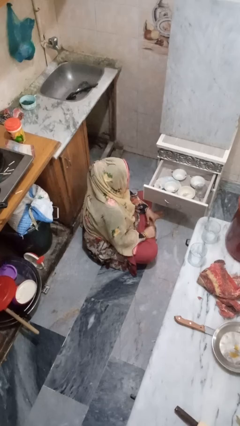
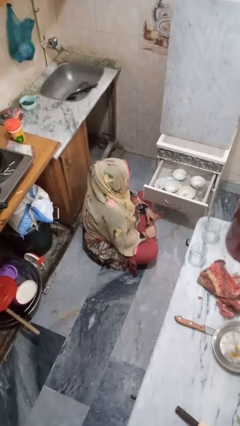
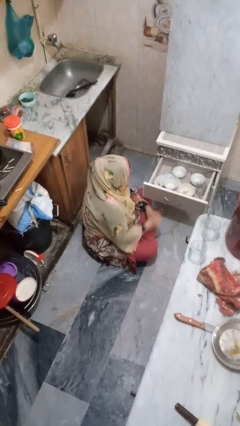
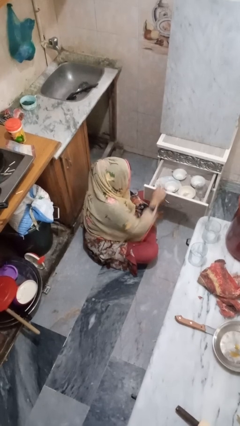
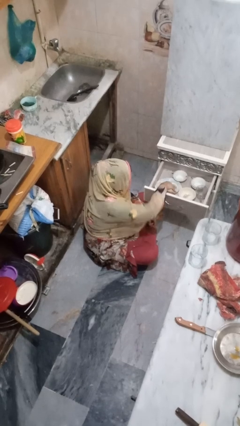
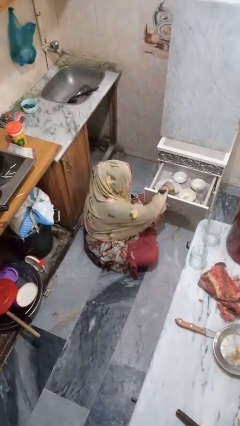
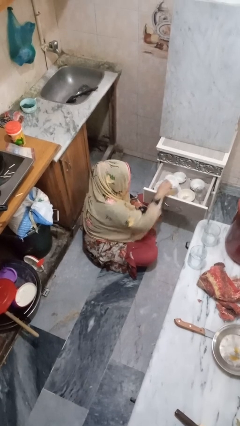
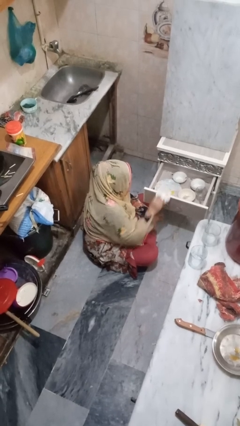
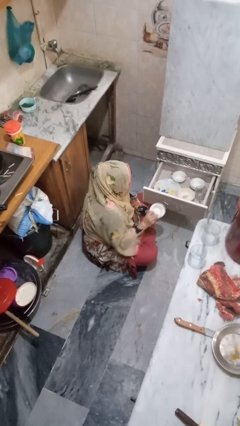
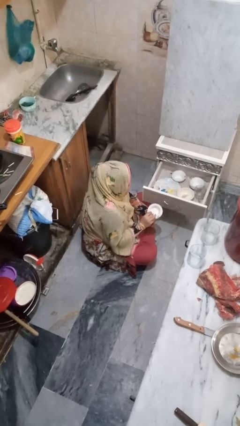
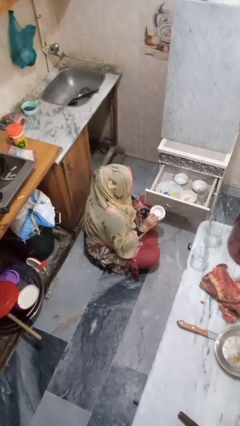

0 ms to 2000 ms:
person takes object from kitchen drawer

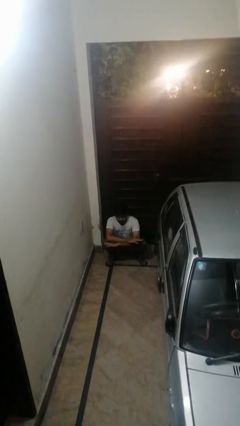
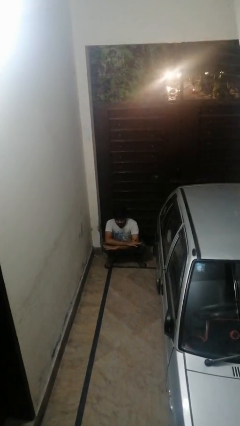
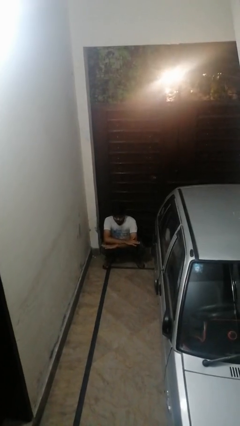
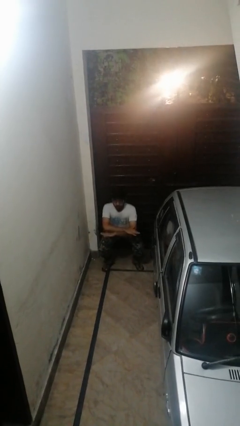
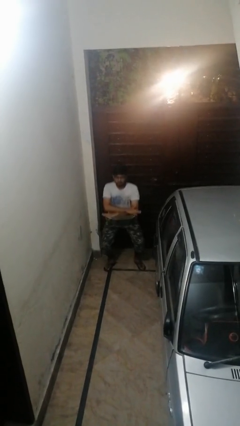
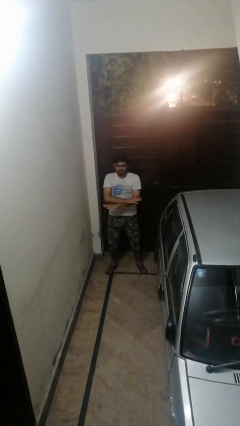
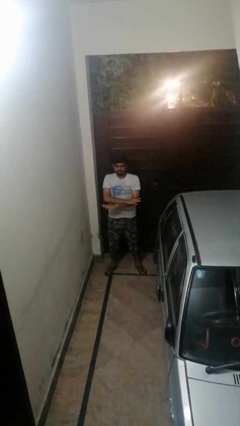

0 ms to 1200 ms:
person stands up

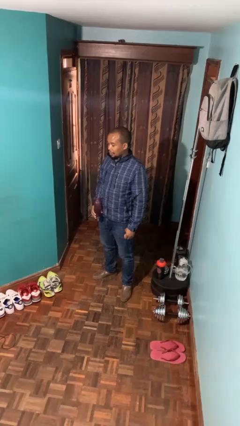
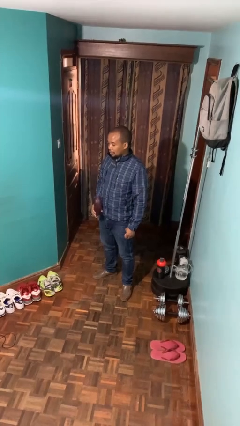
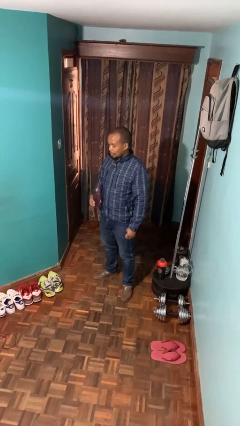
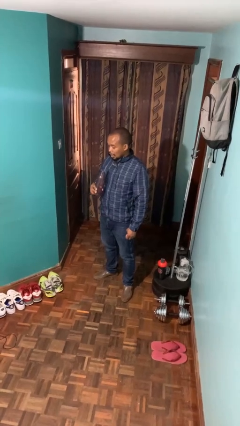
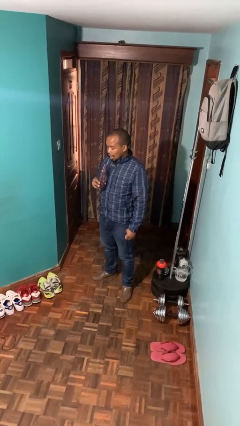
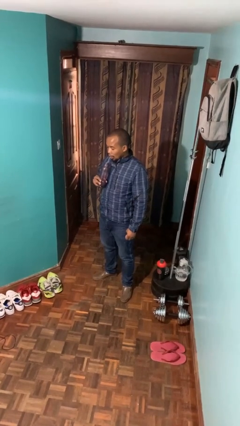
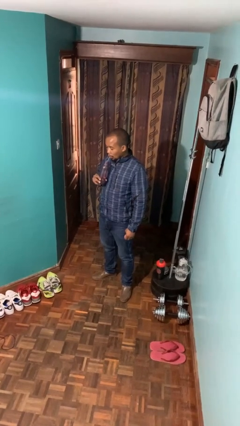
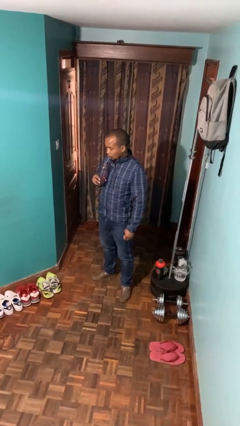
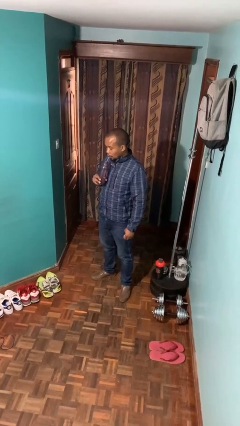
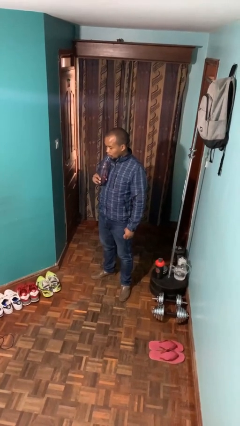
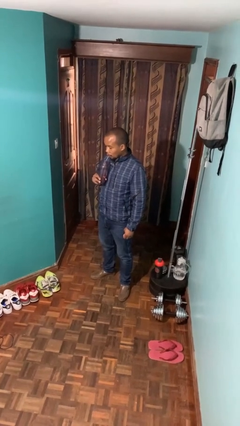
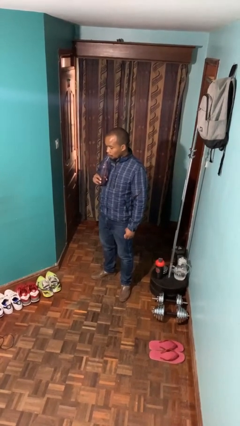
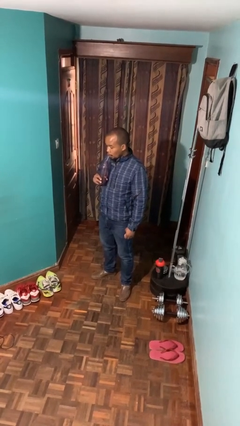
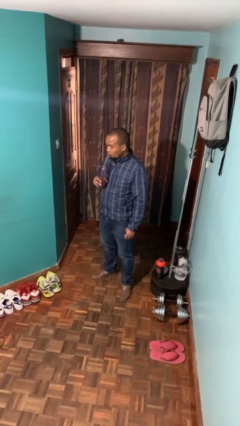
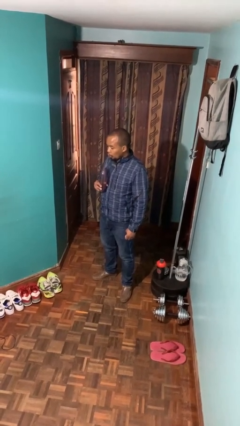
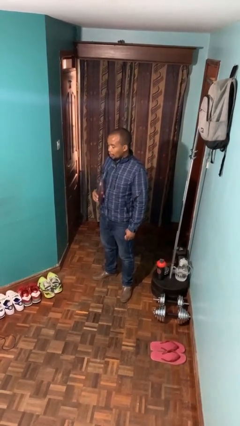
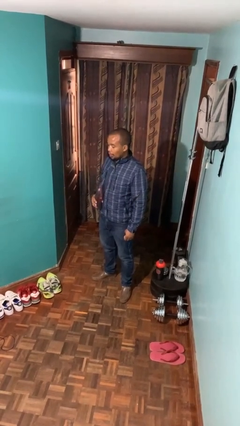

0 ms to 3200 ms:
person drinks from straw

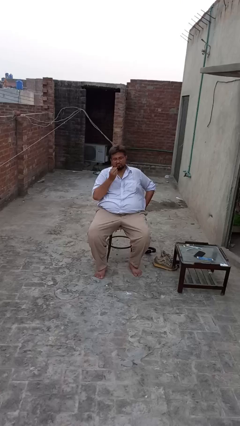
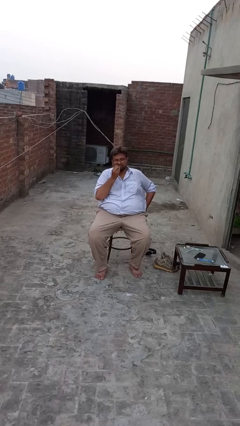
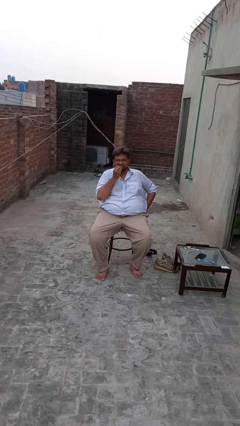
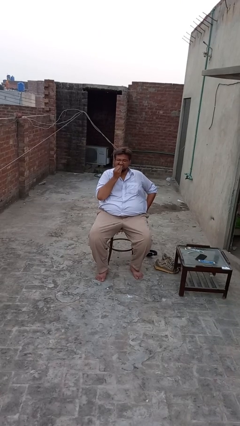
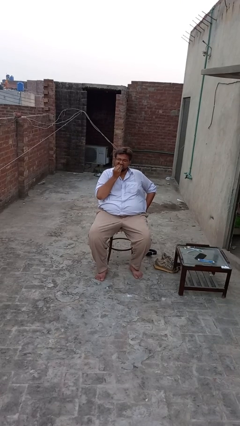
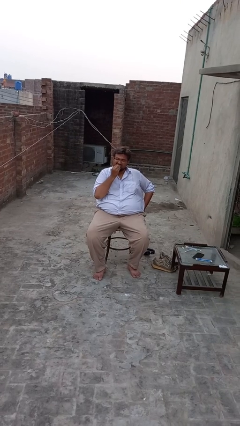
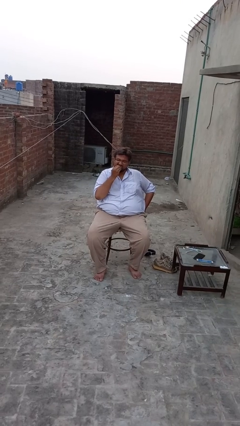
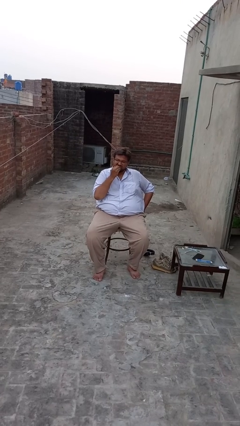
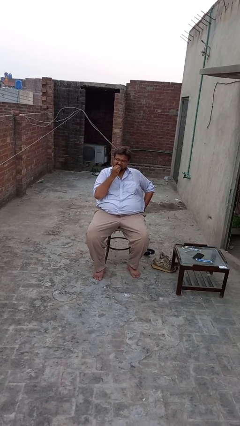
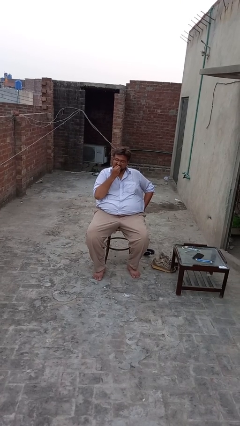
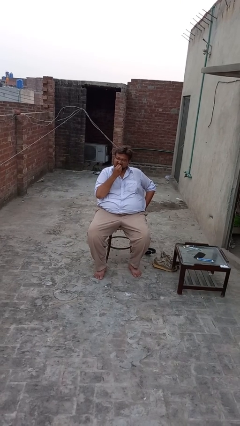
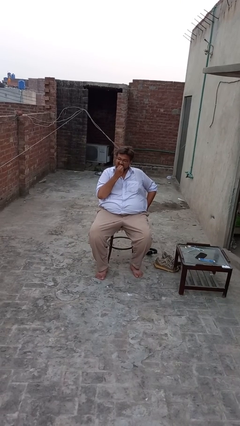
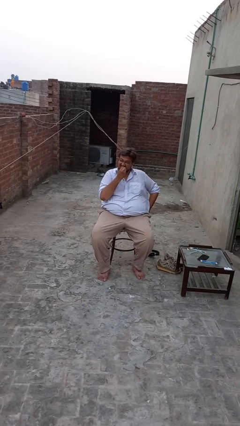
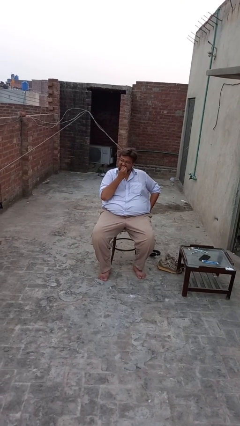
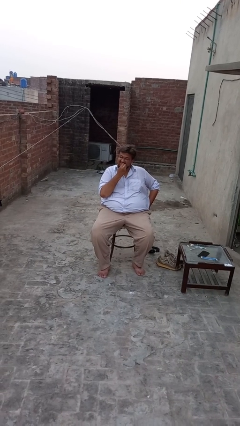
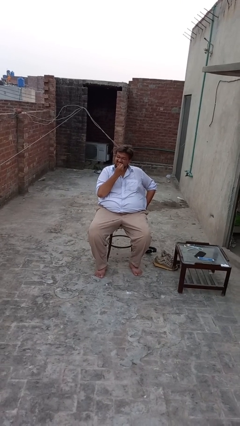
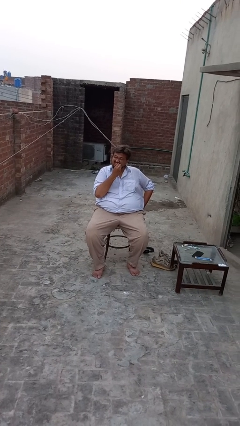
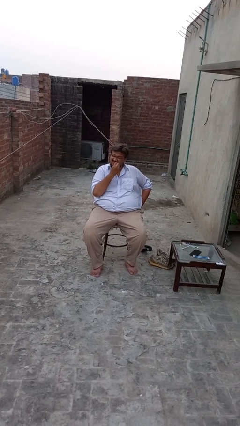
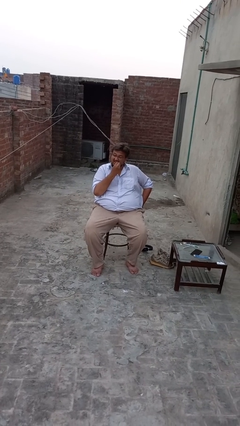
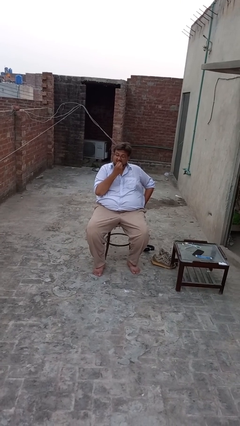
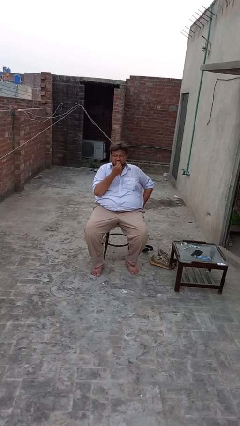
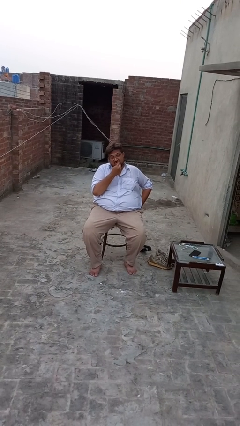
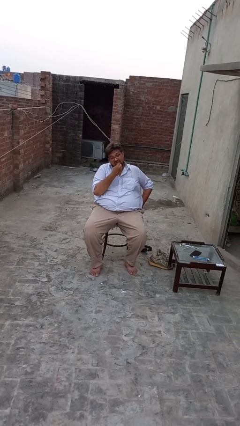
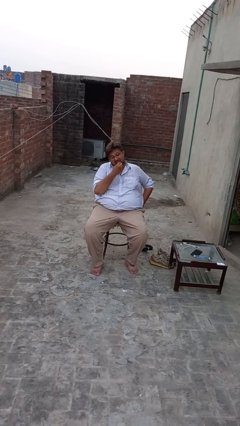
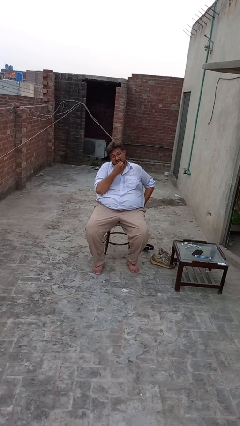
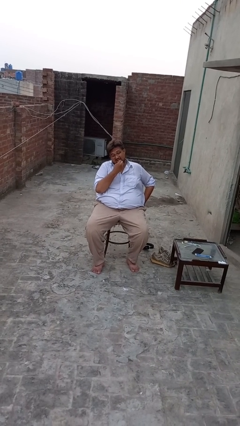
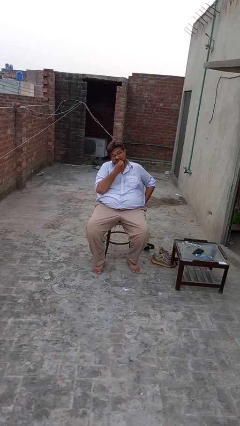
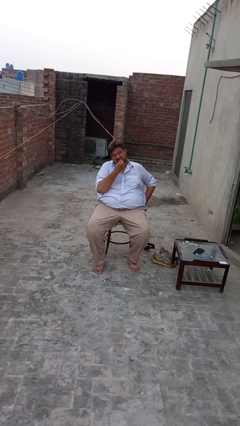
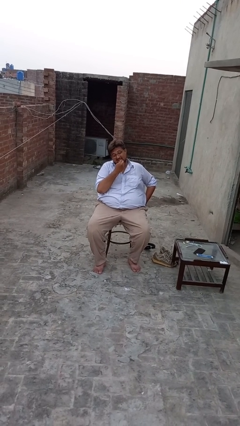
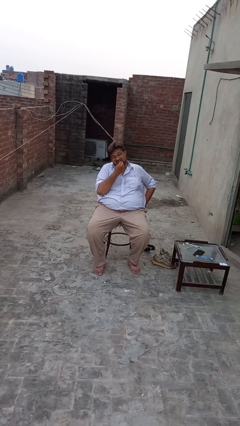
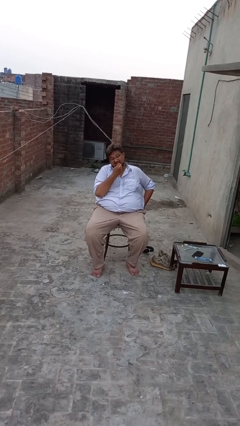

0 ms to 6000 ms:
person flosses

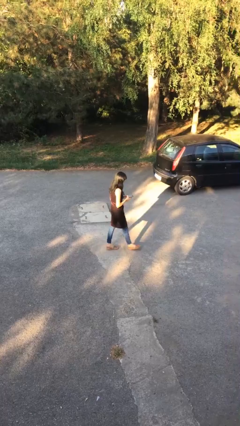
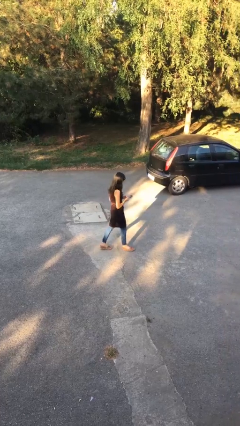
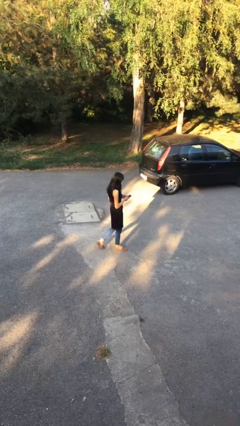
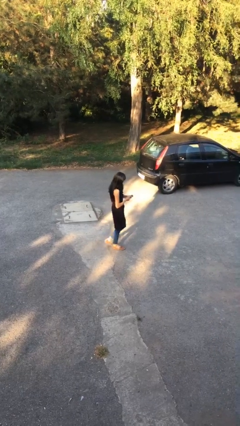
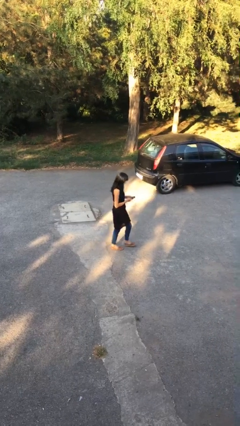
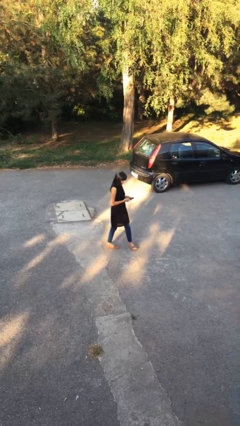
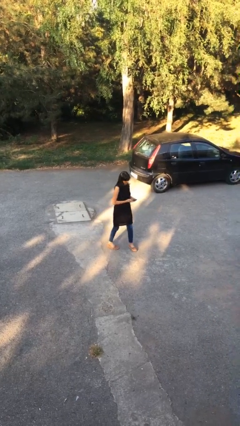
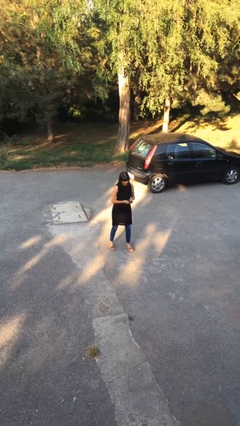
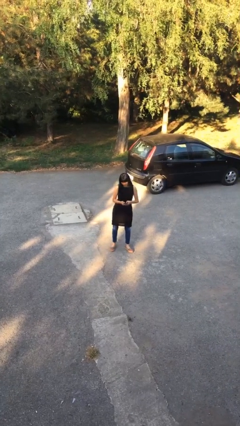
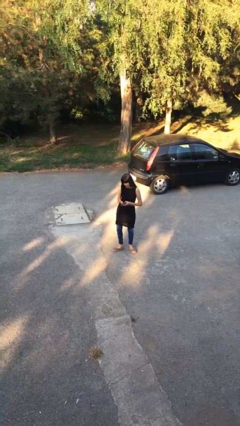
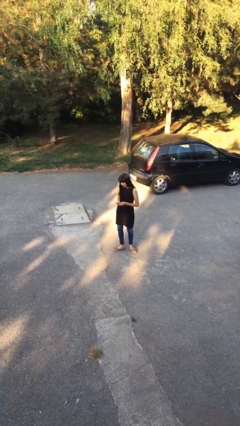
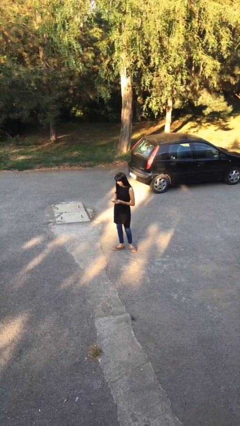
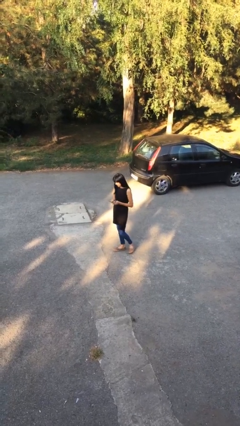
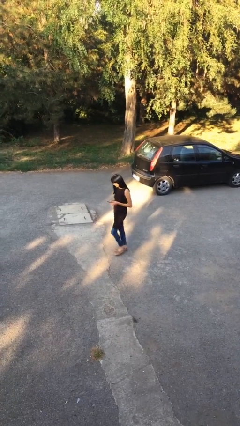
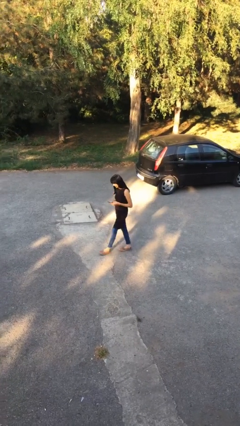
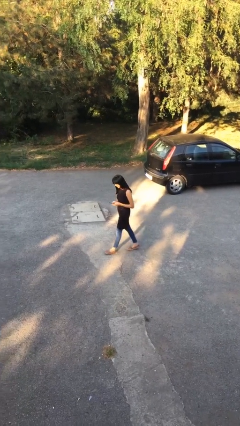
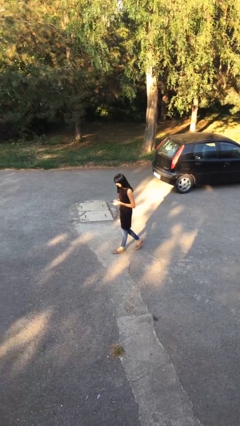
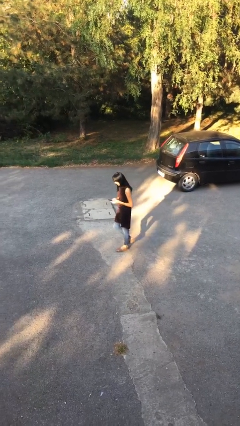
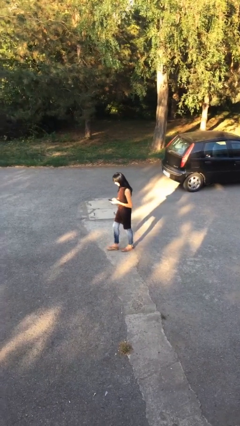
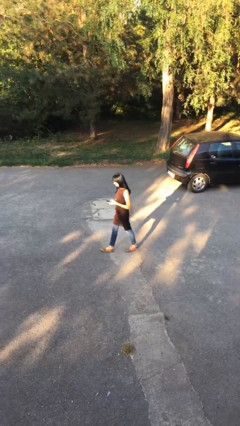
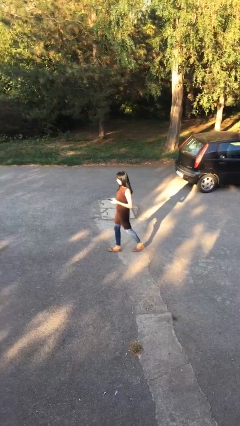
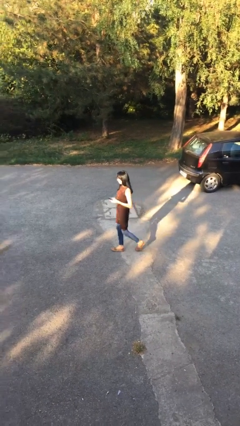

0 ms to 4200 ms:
person texts on phone

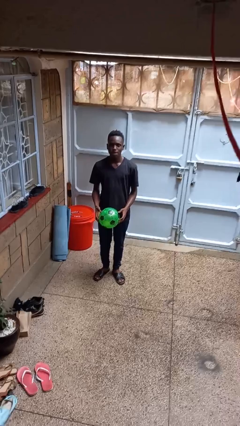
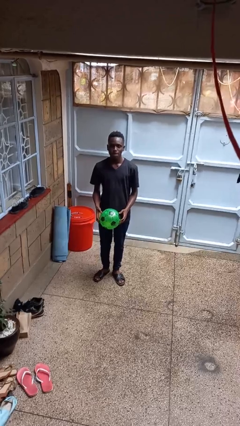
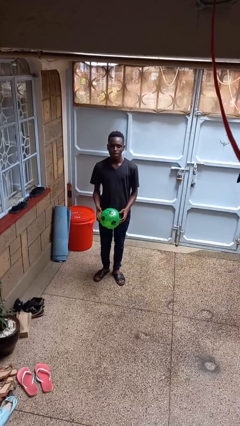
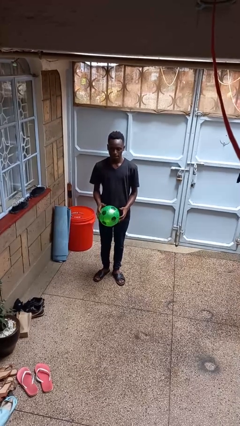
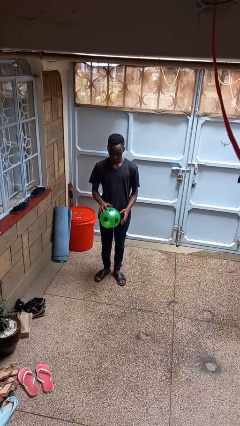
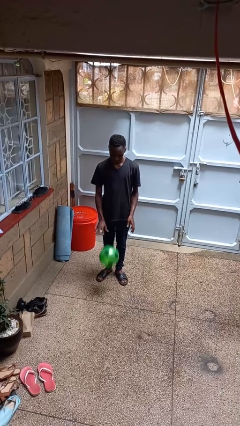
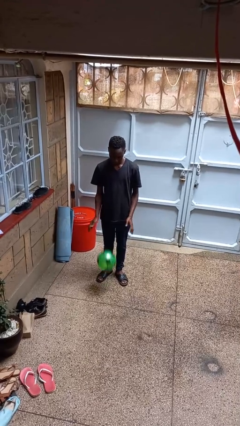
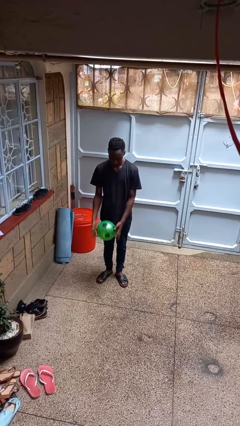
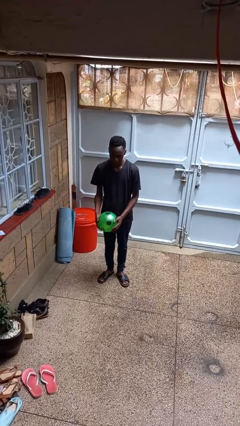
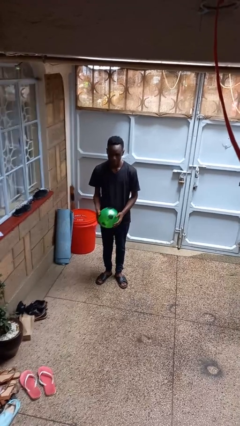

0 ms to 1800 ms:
person bounces ball on floor
